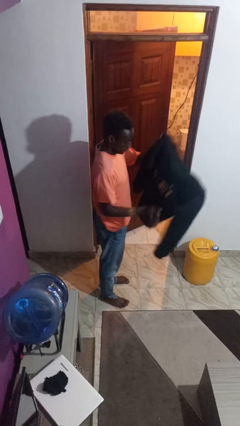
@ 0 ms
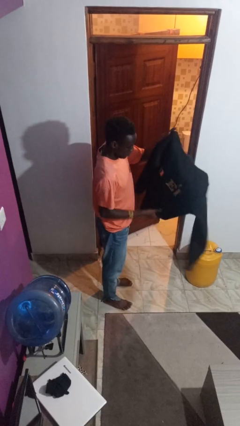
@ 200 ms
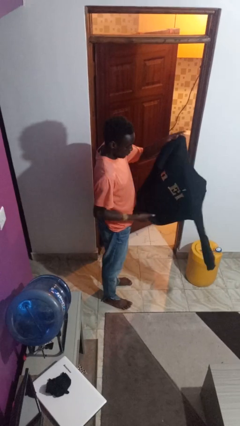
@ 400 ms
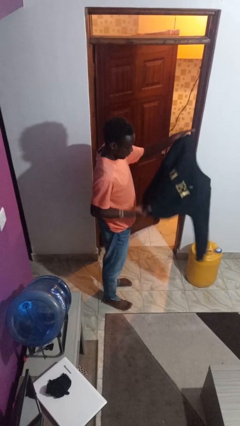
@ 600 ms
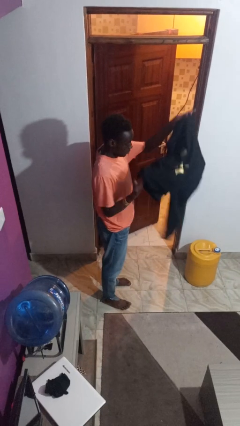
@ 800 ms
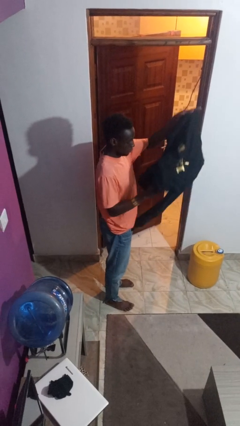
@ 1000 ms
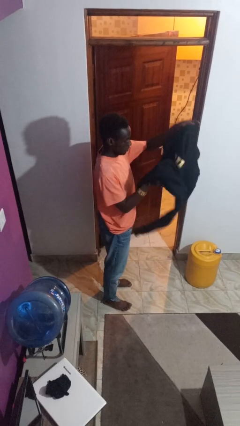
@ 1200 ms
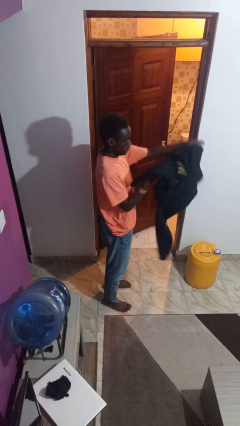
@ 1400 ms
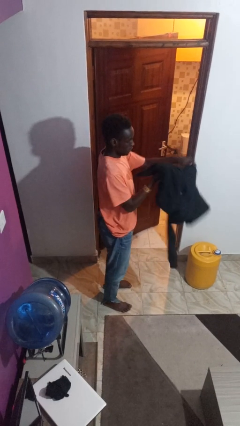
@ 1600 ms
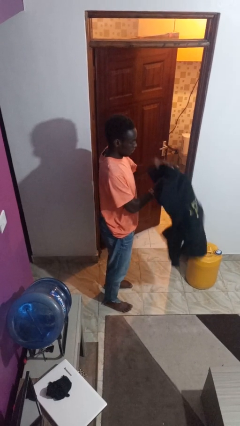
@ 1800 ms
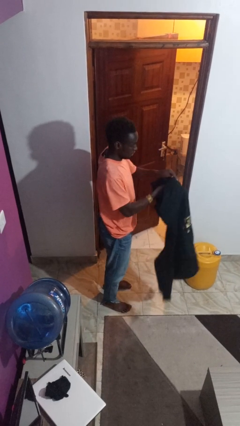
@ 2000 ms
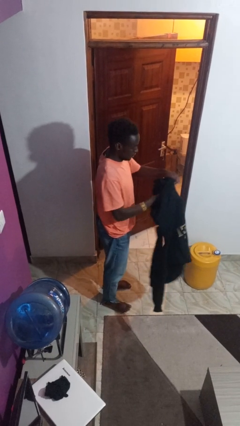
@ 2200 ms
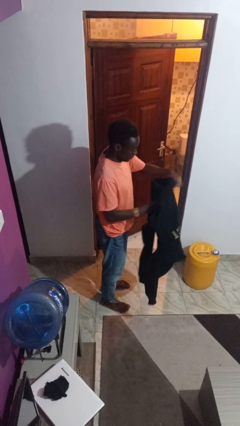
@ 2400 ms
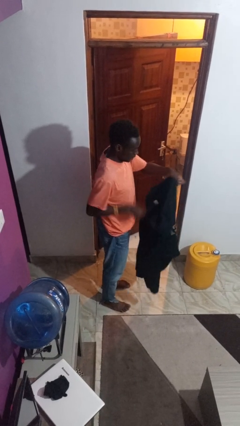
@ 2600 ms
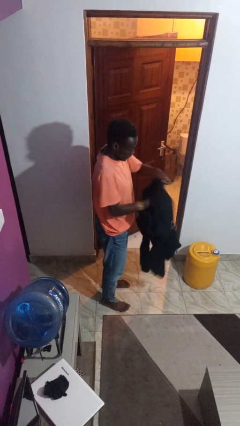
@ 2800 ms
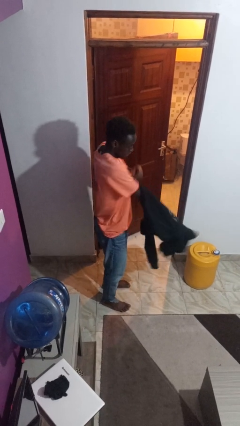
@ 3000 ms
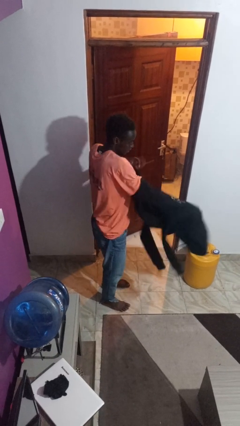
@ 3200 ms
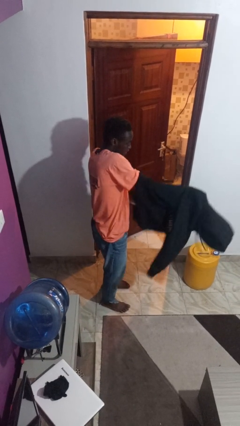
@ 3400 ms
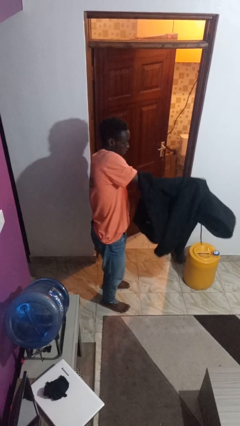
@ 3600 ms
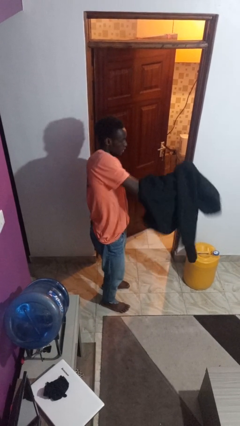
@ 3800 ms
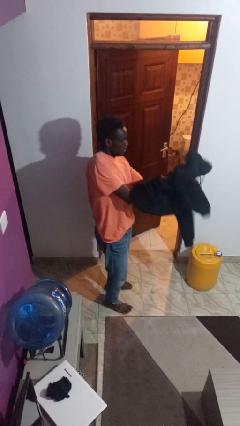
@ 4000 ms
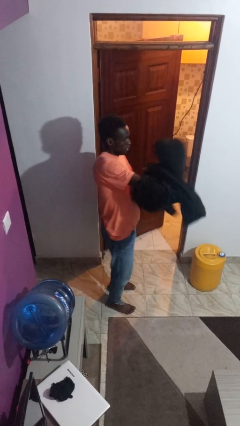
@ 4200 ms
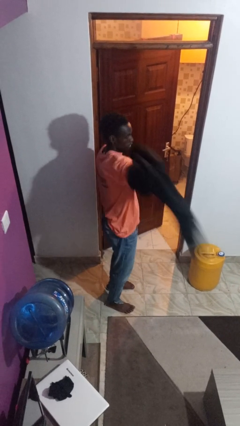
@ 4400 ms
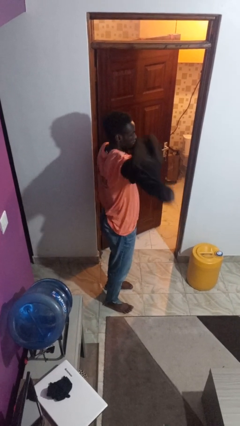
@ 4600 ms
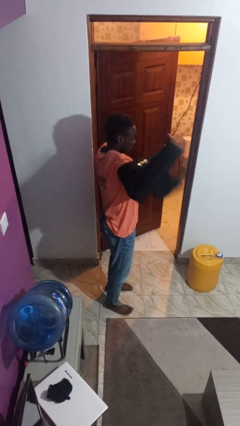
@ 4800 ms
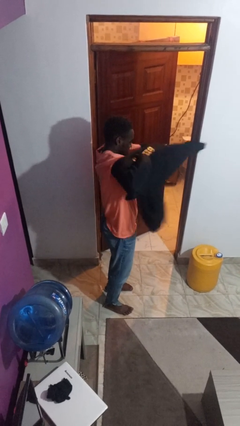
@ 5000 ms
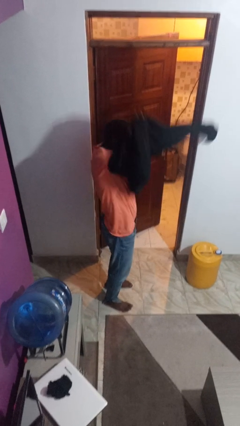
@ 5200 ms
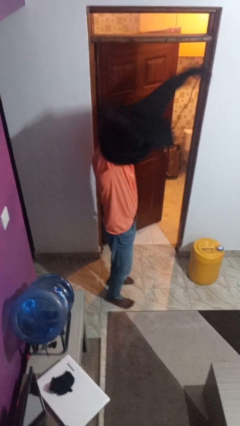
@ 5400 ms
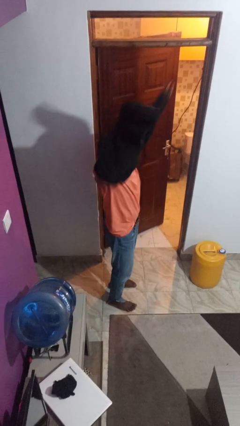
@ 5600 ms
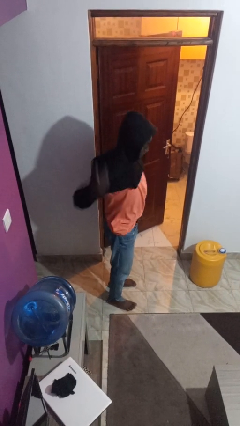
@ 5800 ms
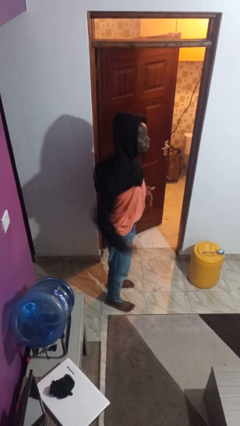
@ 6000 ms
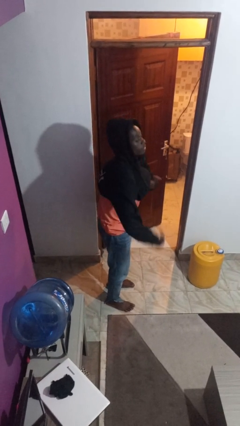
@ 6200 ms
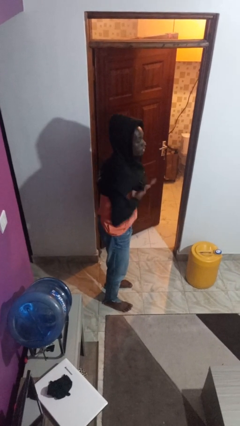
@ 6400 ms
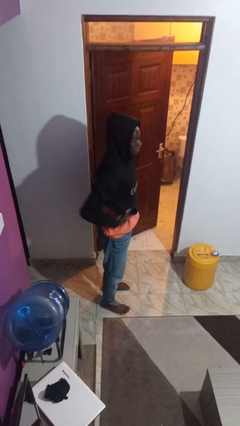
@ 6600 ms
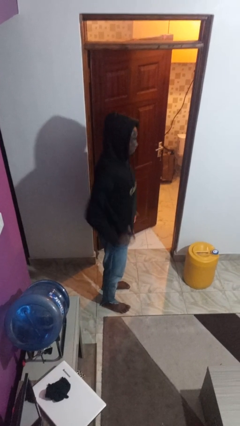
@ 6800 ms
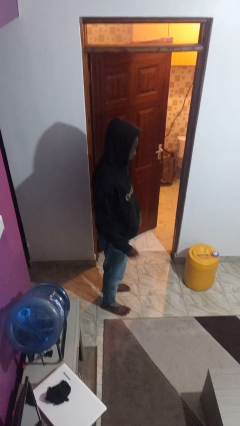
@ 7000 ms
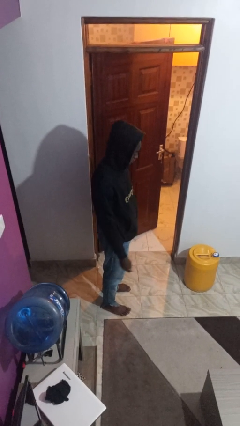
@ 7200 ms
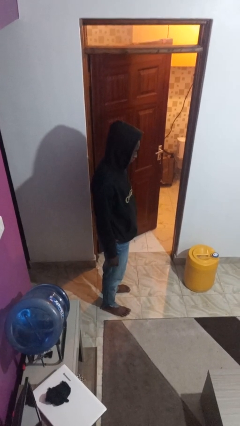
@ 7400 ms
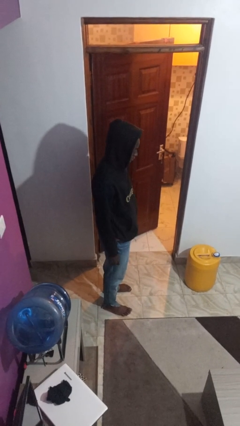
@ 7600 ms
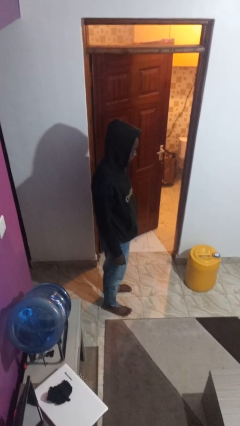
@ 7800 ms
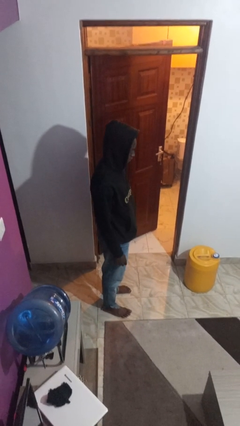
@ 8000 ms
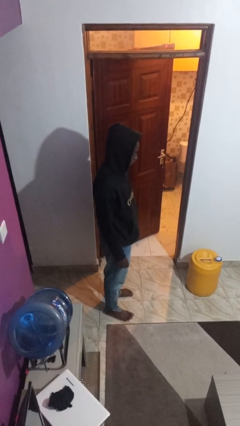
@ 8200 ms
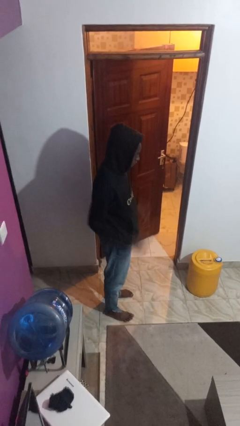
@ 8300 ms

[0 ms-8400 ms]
person puts on hoodie

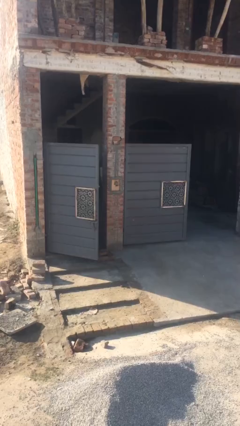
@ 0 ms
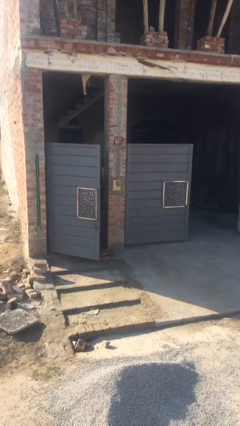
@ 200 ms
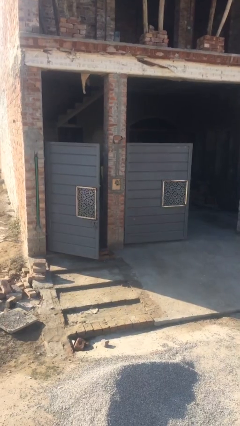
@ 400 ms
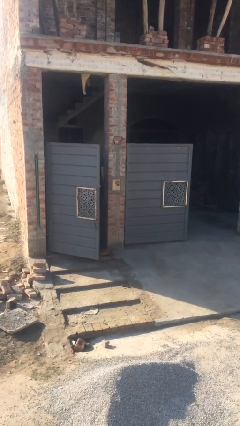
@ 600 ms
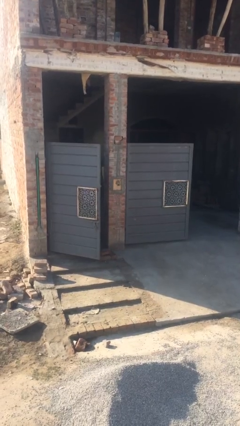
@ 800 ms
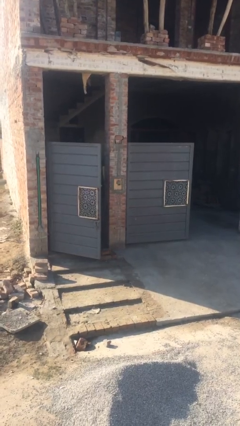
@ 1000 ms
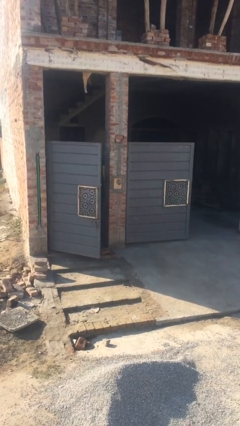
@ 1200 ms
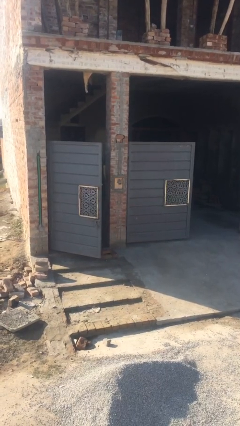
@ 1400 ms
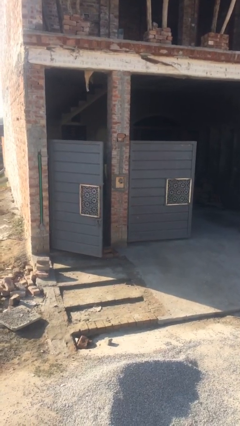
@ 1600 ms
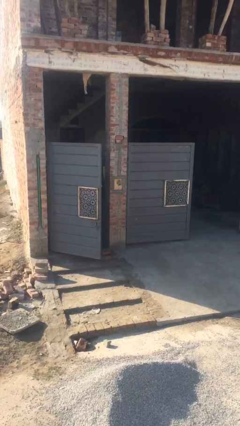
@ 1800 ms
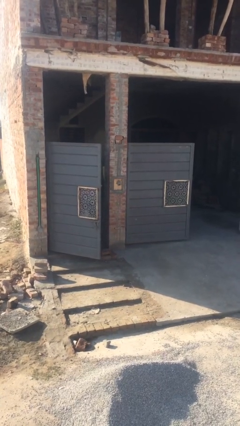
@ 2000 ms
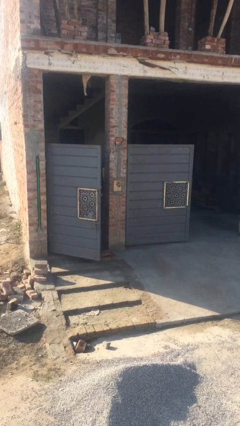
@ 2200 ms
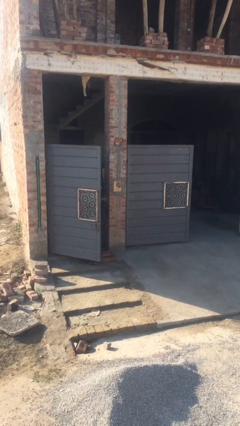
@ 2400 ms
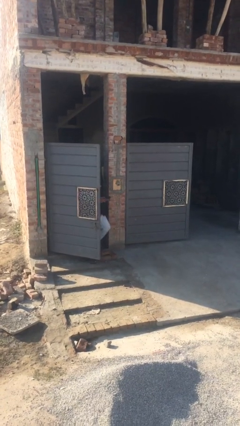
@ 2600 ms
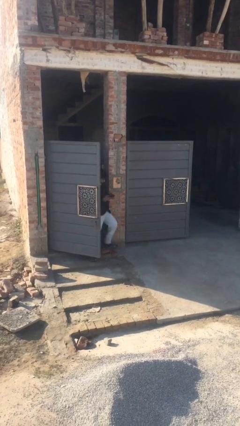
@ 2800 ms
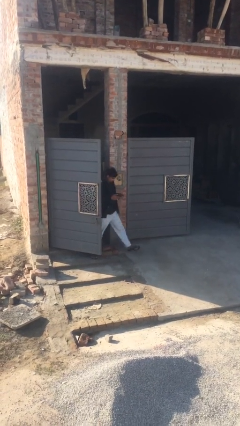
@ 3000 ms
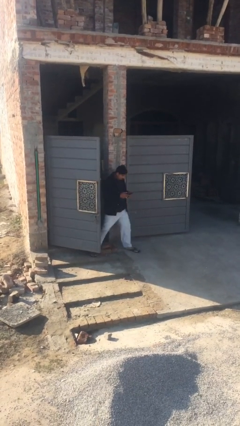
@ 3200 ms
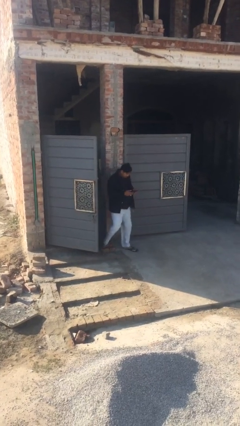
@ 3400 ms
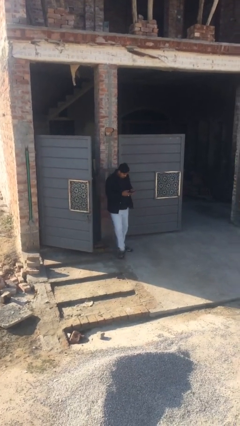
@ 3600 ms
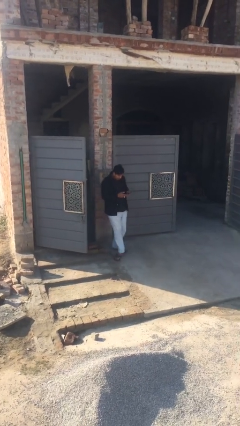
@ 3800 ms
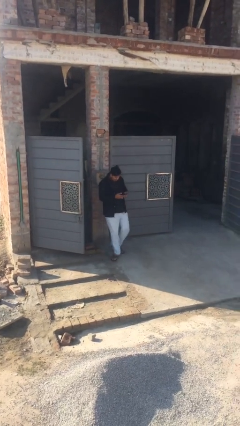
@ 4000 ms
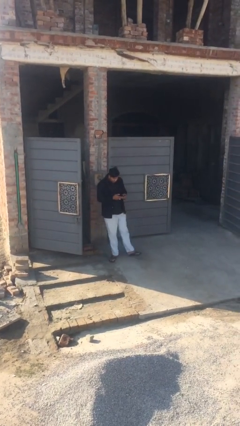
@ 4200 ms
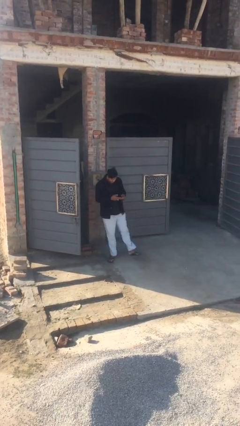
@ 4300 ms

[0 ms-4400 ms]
person enters scene through structure

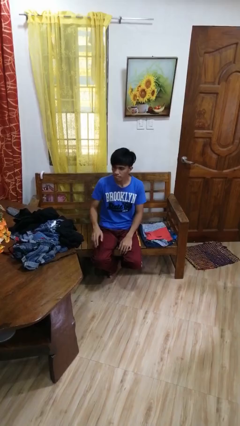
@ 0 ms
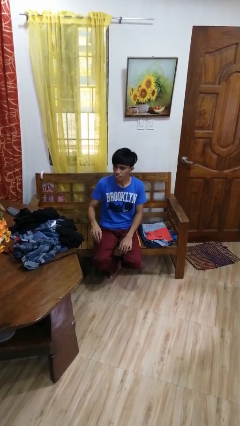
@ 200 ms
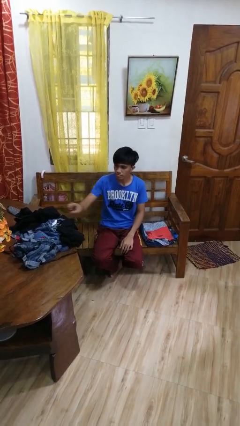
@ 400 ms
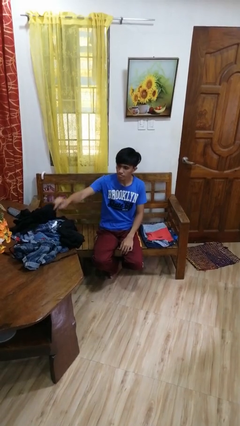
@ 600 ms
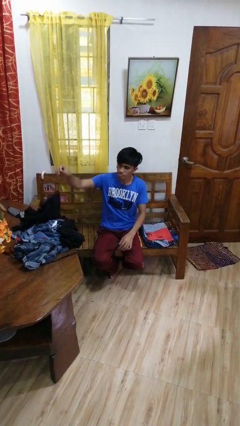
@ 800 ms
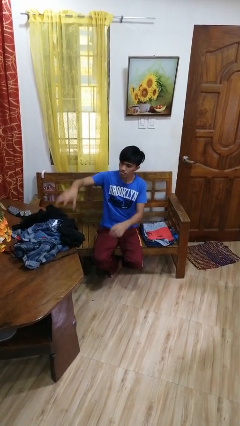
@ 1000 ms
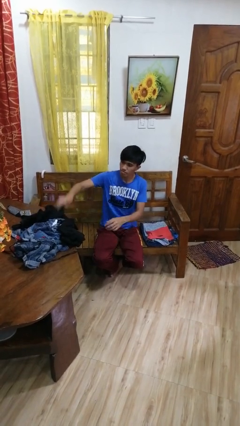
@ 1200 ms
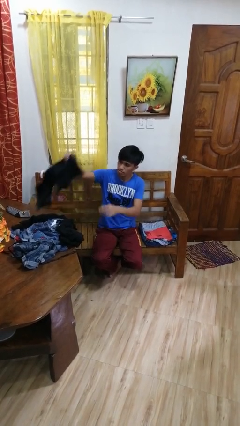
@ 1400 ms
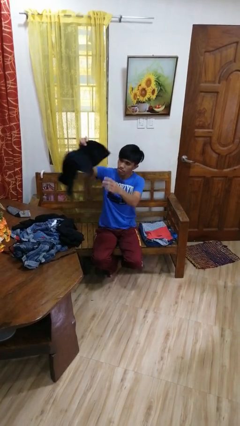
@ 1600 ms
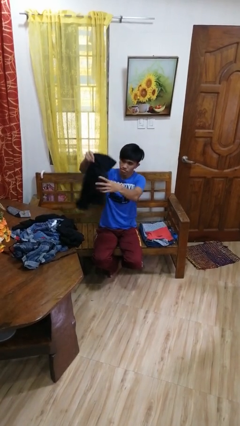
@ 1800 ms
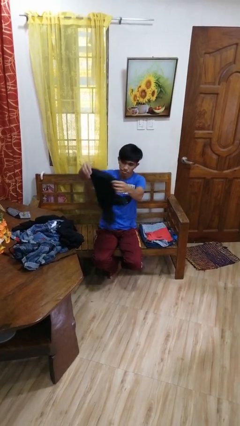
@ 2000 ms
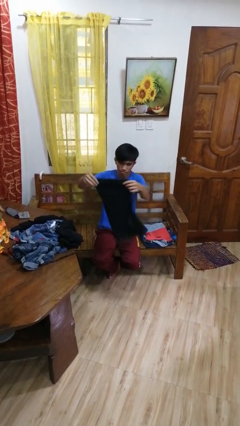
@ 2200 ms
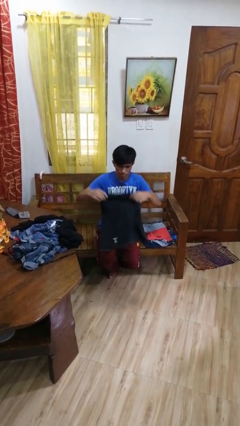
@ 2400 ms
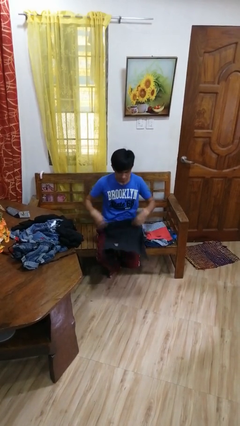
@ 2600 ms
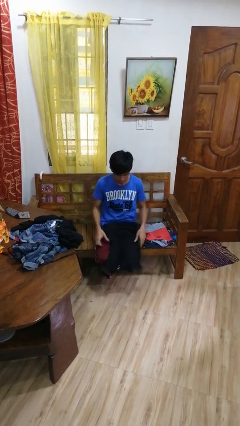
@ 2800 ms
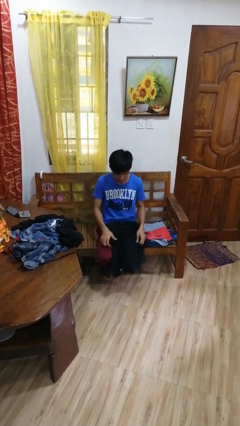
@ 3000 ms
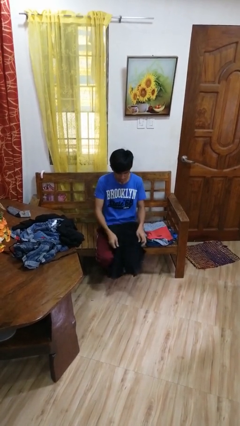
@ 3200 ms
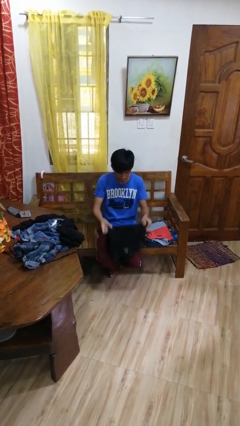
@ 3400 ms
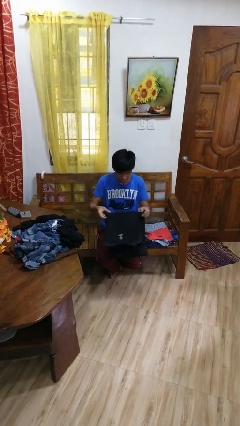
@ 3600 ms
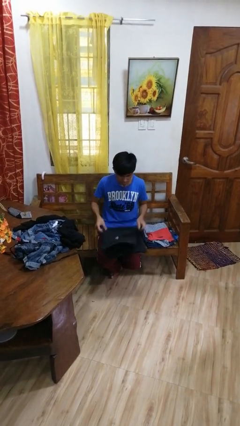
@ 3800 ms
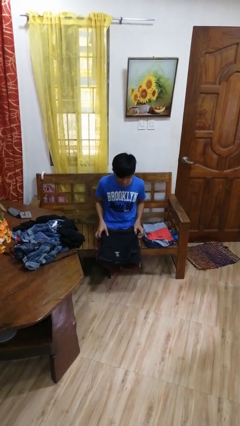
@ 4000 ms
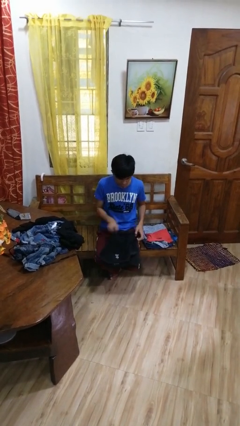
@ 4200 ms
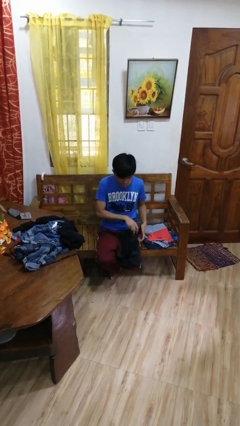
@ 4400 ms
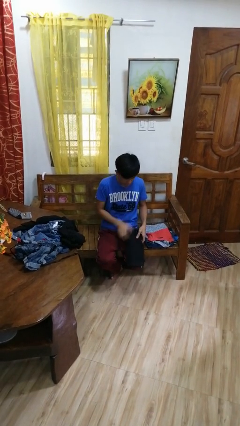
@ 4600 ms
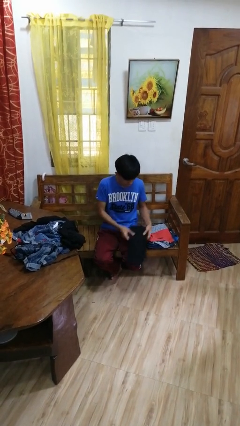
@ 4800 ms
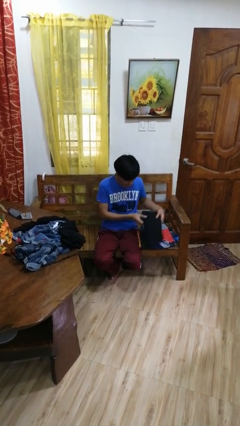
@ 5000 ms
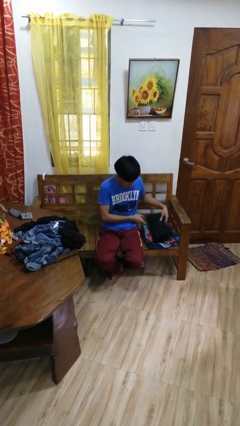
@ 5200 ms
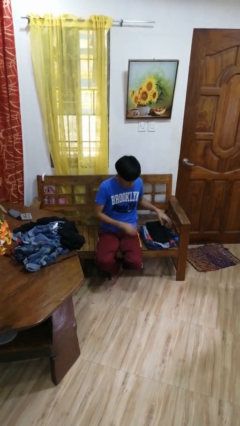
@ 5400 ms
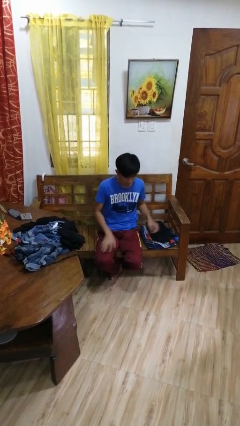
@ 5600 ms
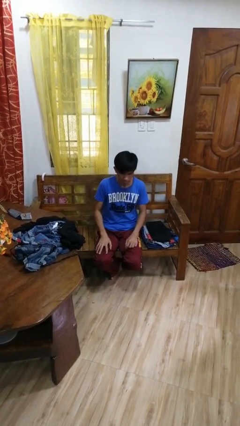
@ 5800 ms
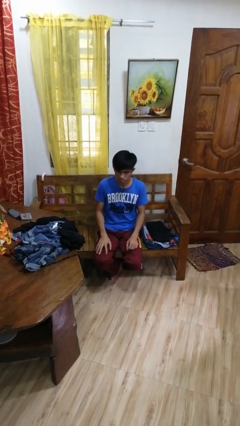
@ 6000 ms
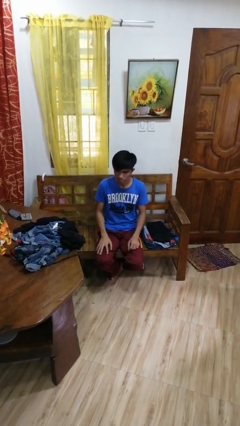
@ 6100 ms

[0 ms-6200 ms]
person folds shirt
